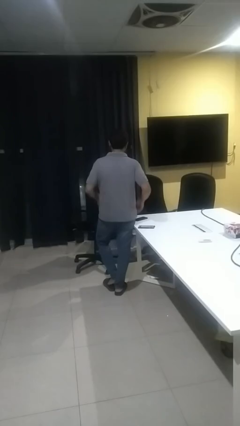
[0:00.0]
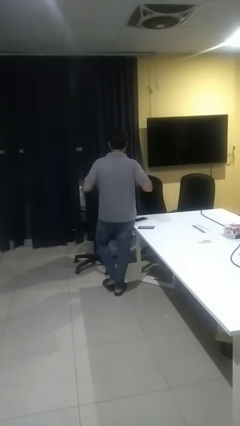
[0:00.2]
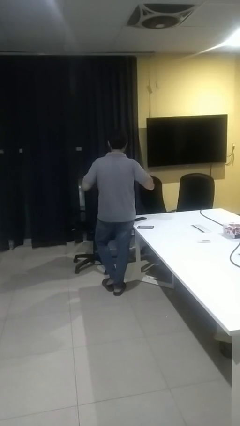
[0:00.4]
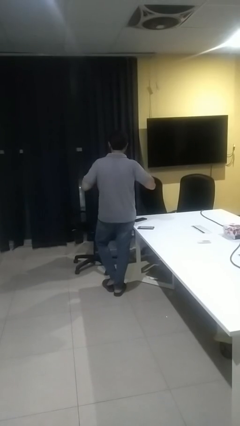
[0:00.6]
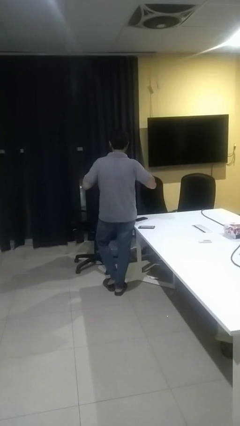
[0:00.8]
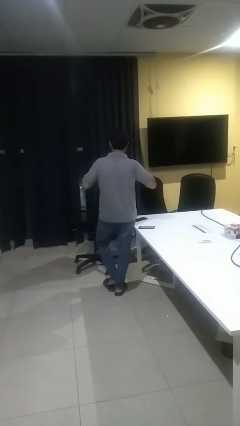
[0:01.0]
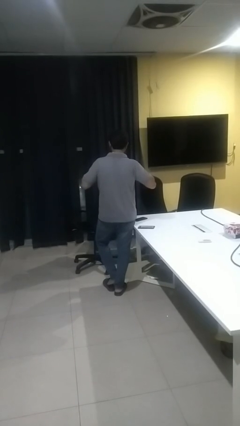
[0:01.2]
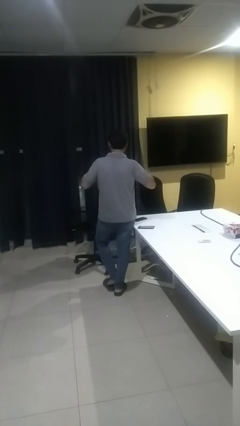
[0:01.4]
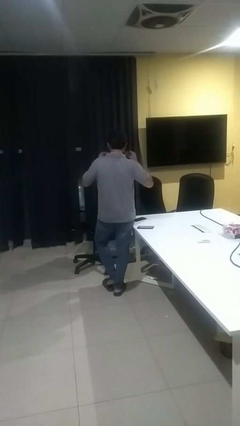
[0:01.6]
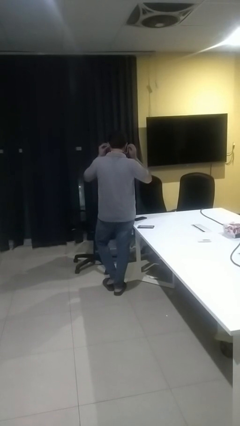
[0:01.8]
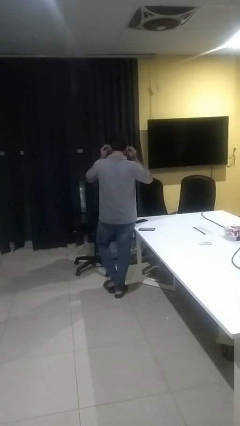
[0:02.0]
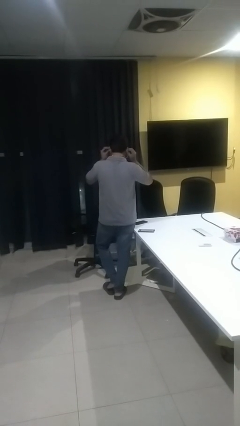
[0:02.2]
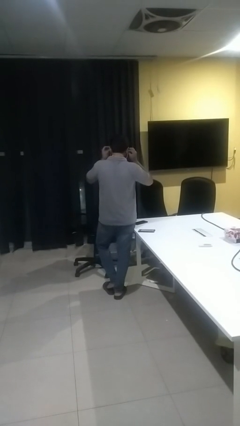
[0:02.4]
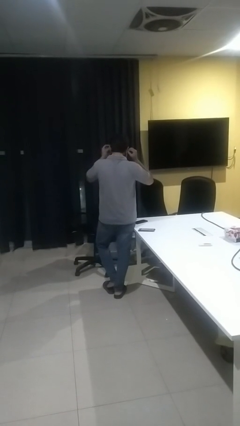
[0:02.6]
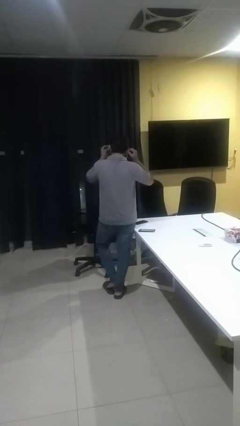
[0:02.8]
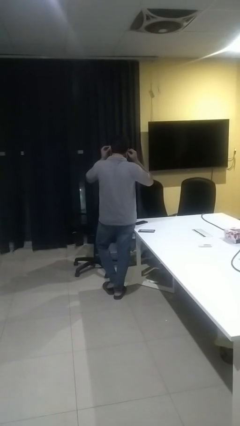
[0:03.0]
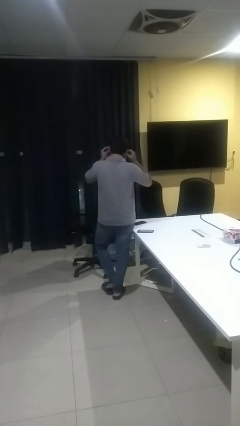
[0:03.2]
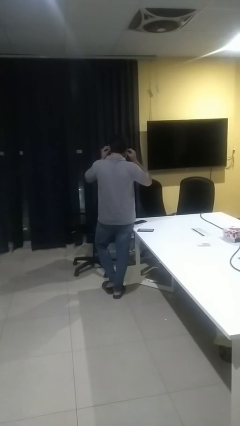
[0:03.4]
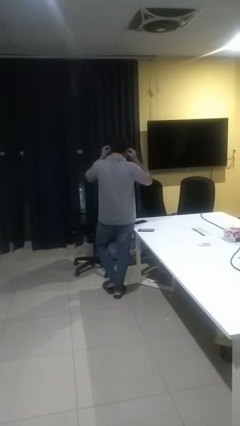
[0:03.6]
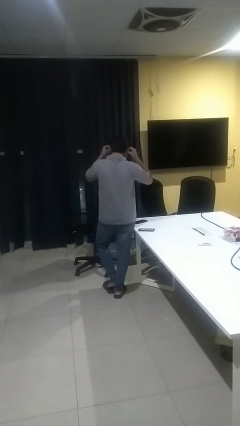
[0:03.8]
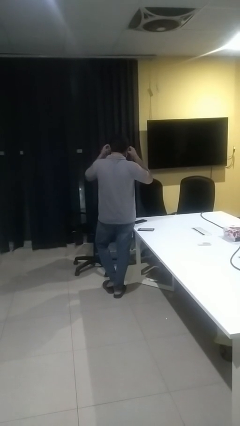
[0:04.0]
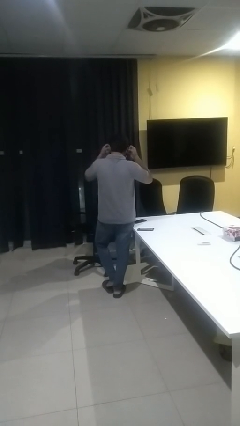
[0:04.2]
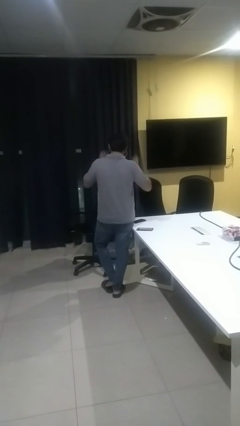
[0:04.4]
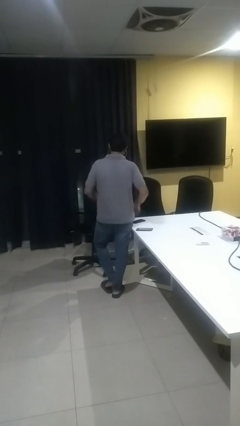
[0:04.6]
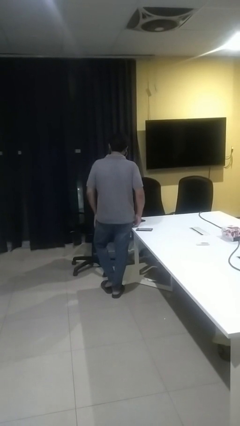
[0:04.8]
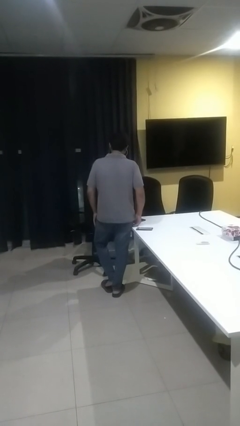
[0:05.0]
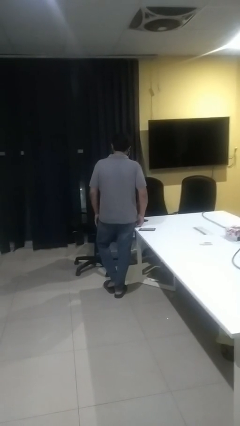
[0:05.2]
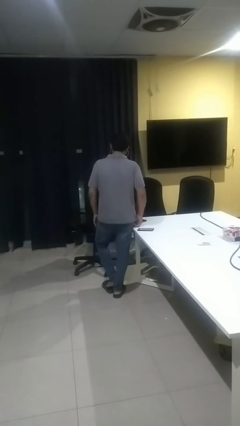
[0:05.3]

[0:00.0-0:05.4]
person puts on headphones

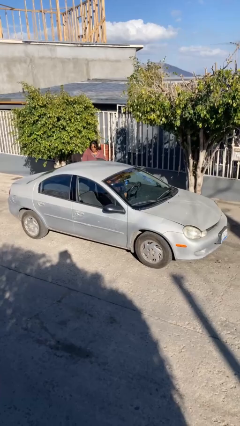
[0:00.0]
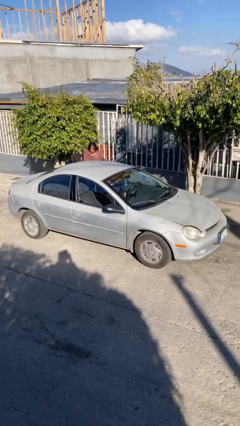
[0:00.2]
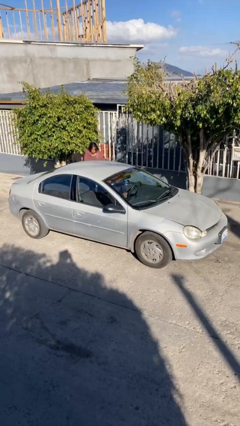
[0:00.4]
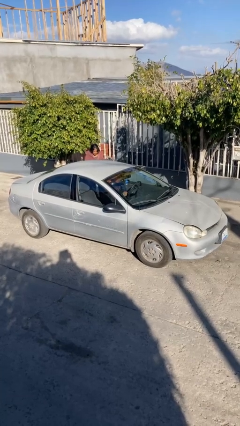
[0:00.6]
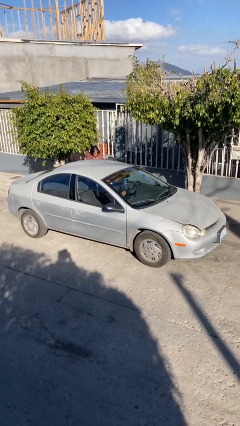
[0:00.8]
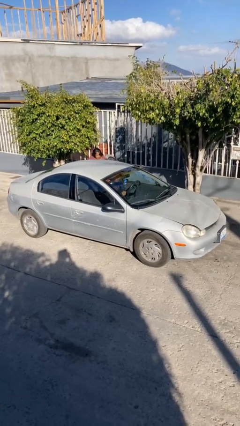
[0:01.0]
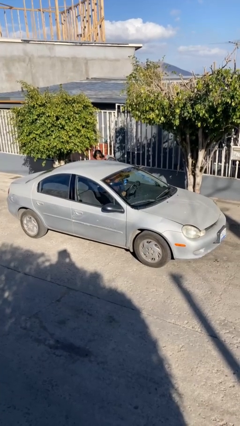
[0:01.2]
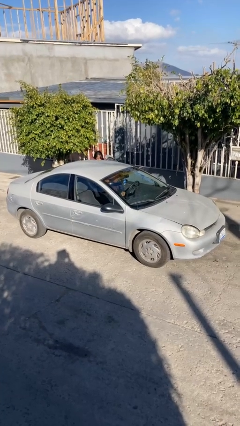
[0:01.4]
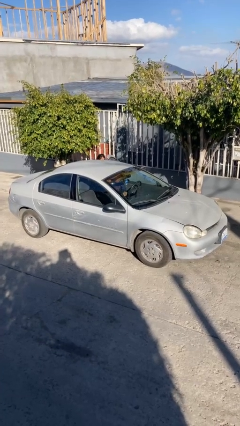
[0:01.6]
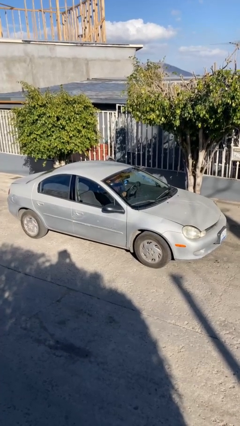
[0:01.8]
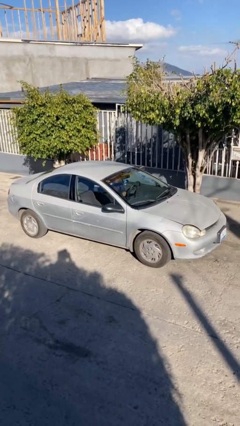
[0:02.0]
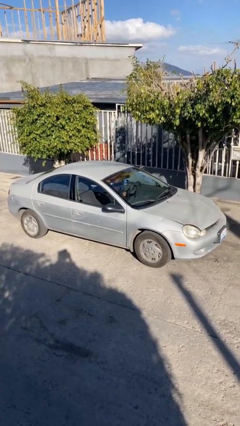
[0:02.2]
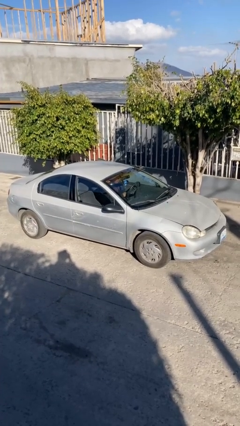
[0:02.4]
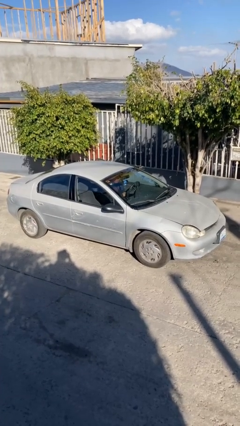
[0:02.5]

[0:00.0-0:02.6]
car picks up person

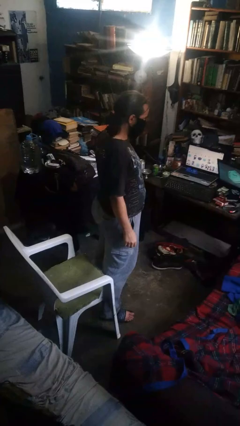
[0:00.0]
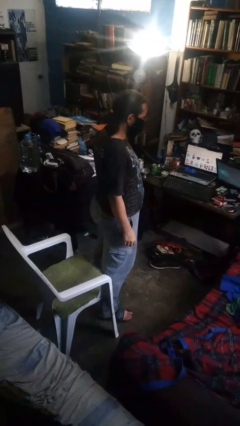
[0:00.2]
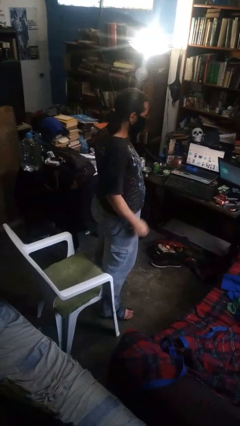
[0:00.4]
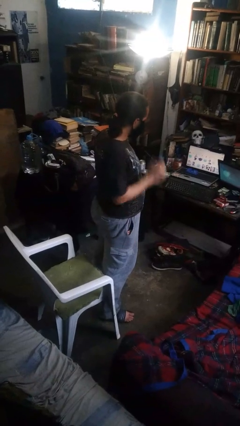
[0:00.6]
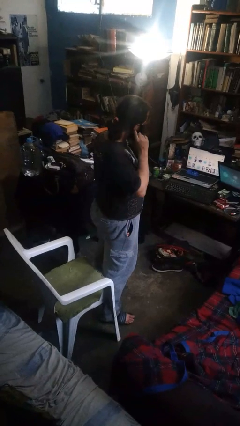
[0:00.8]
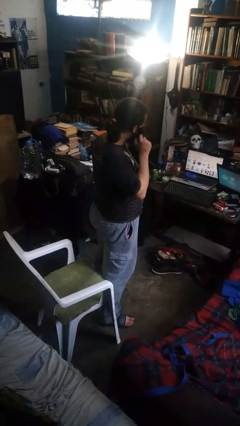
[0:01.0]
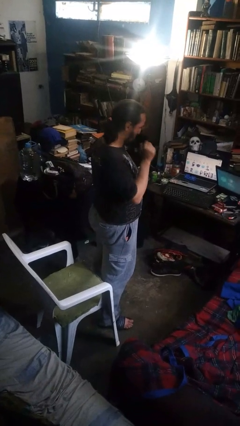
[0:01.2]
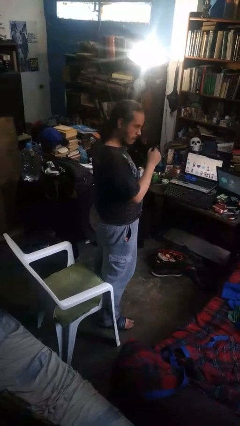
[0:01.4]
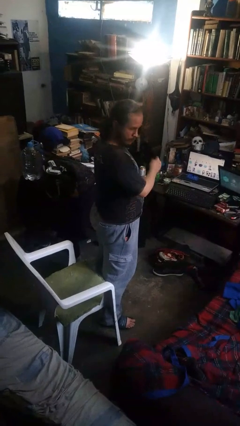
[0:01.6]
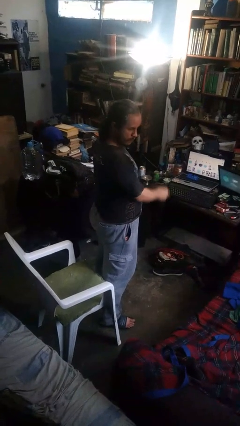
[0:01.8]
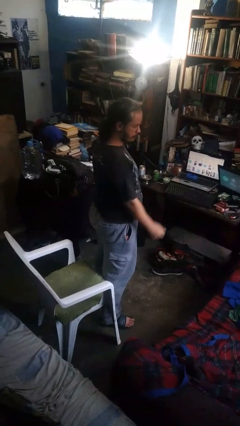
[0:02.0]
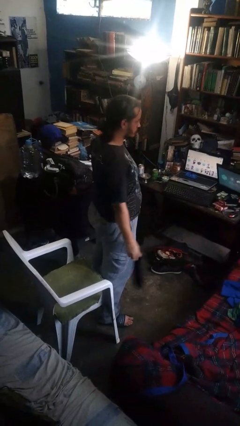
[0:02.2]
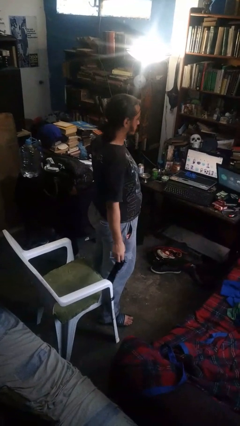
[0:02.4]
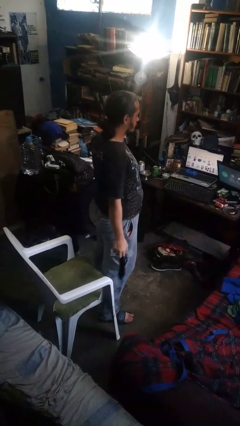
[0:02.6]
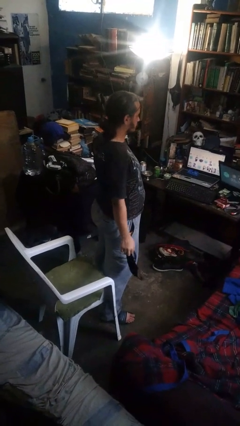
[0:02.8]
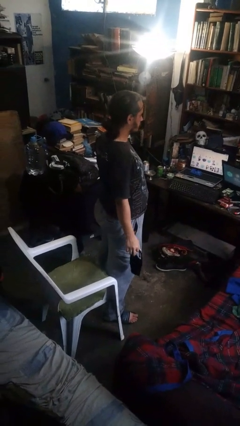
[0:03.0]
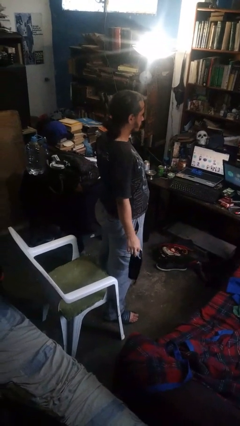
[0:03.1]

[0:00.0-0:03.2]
person takes off facemask

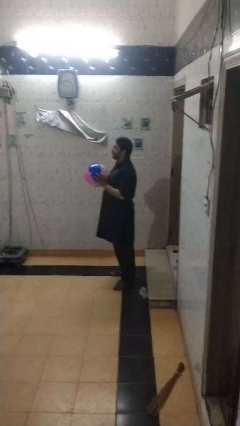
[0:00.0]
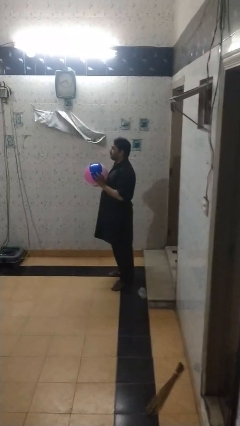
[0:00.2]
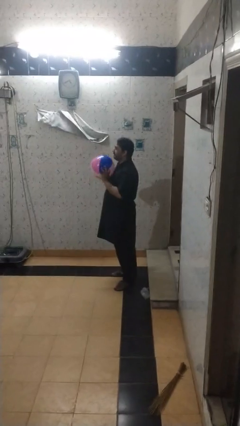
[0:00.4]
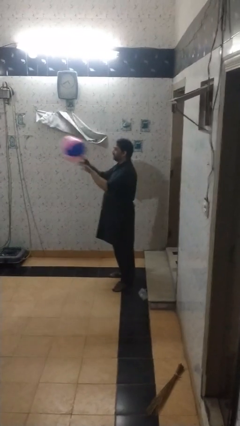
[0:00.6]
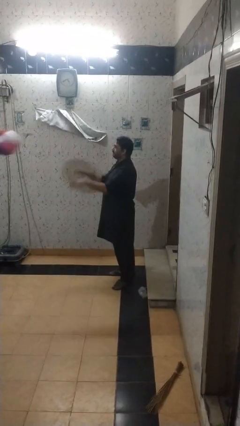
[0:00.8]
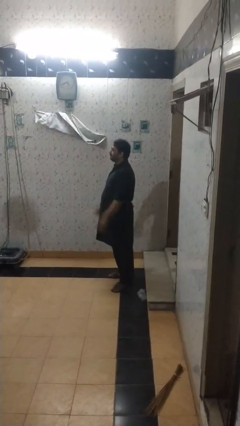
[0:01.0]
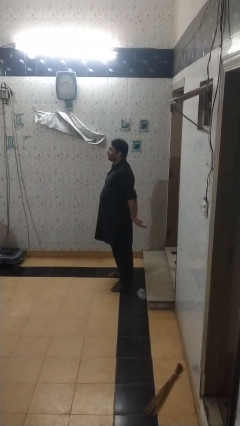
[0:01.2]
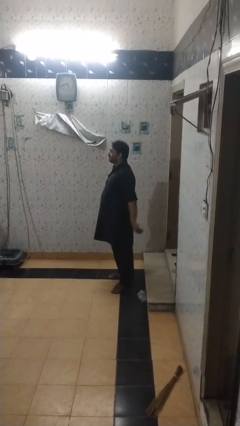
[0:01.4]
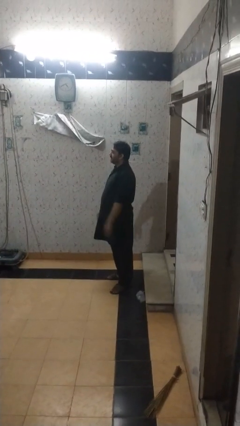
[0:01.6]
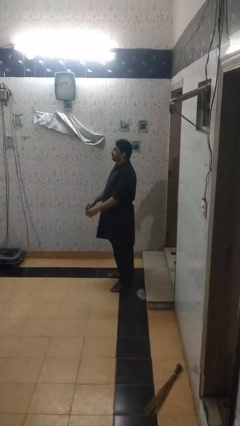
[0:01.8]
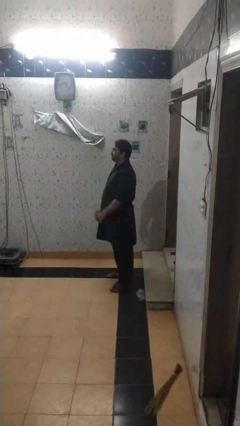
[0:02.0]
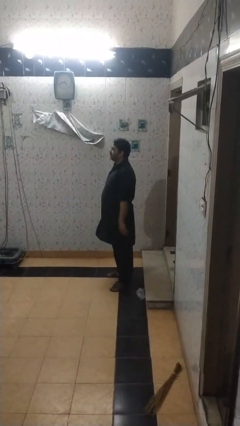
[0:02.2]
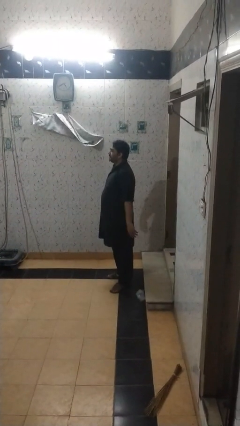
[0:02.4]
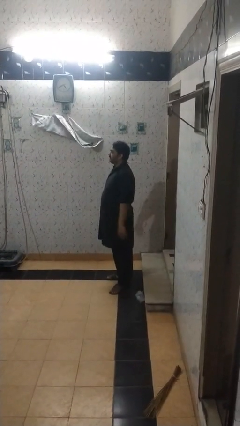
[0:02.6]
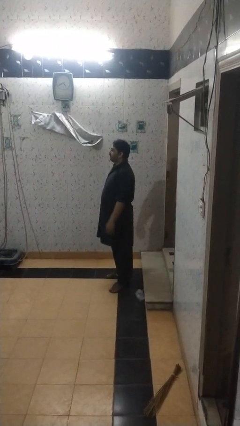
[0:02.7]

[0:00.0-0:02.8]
person throws object to person

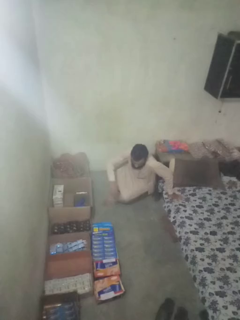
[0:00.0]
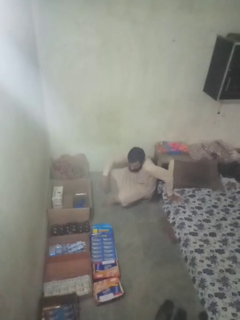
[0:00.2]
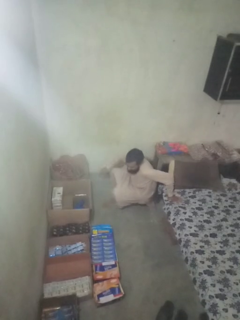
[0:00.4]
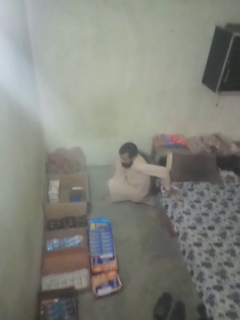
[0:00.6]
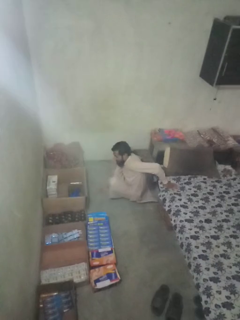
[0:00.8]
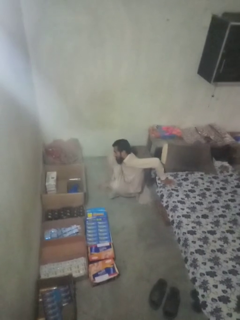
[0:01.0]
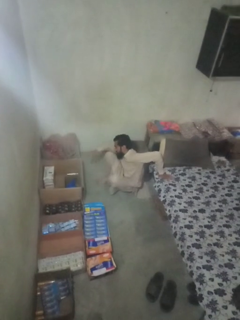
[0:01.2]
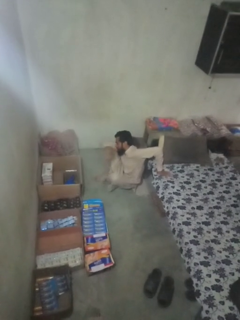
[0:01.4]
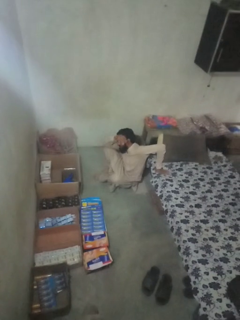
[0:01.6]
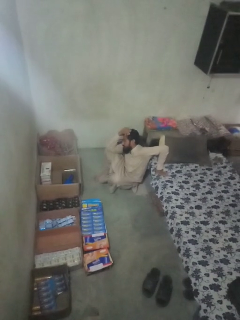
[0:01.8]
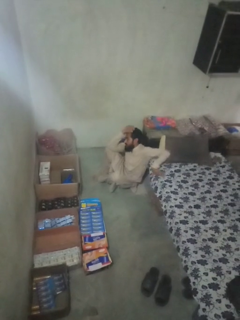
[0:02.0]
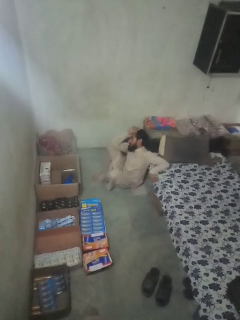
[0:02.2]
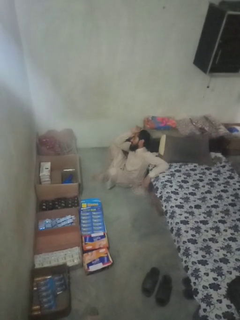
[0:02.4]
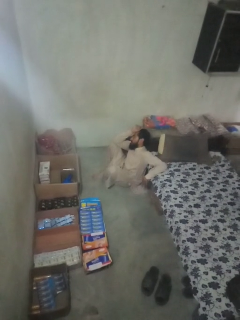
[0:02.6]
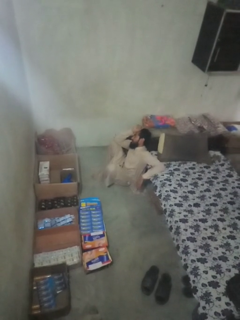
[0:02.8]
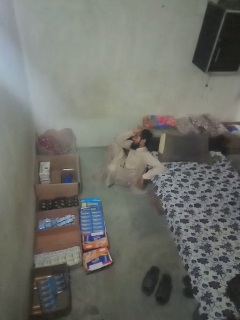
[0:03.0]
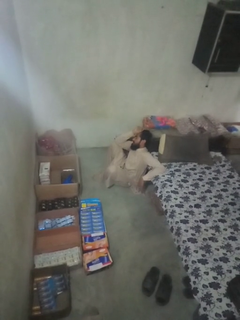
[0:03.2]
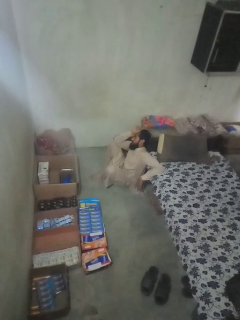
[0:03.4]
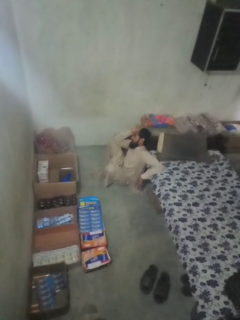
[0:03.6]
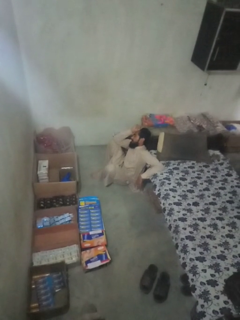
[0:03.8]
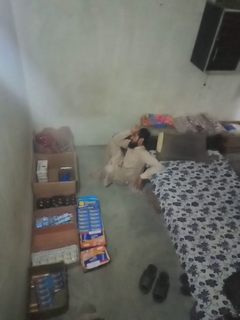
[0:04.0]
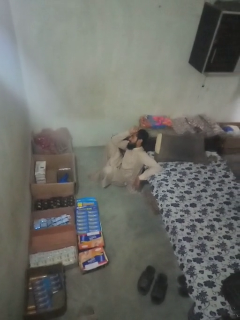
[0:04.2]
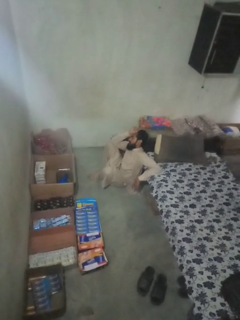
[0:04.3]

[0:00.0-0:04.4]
person lies down on floor

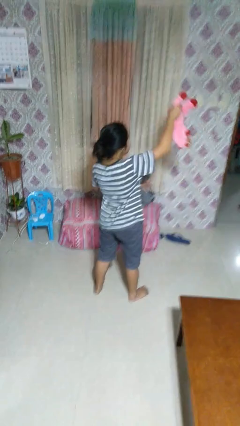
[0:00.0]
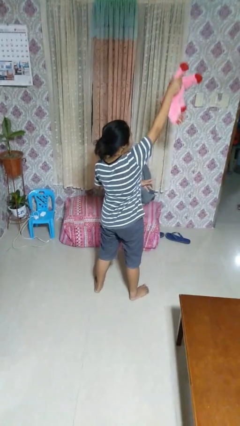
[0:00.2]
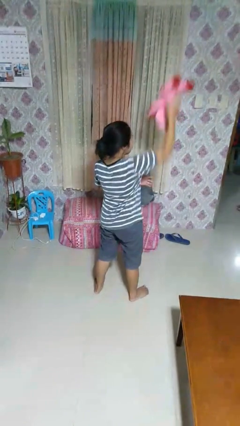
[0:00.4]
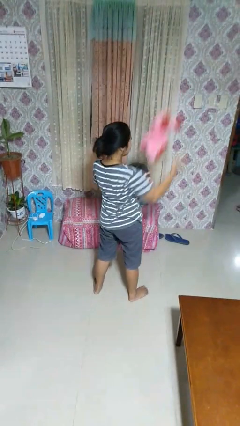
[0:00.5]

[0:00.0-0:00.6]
person drops object
